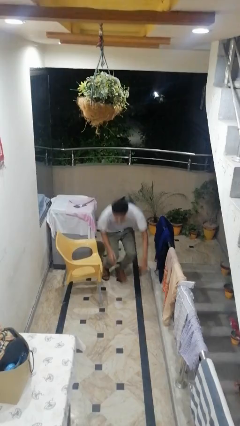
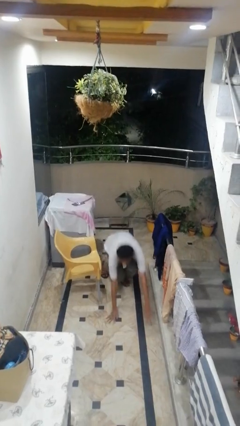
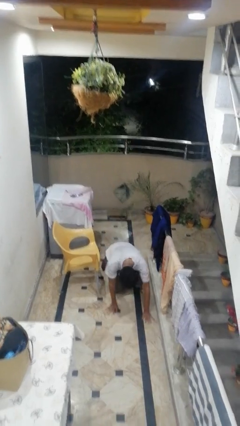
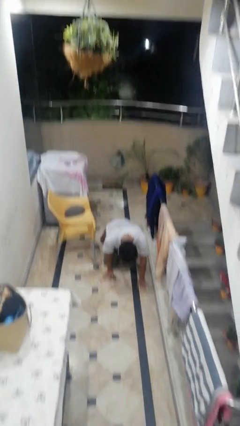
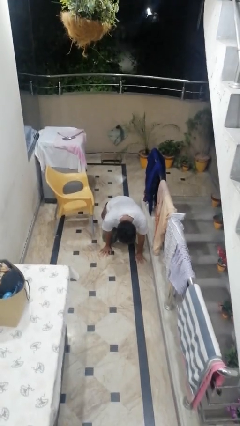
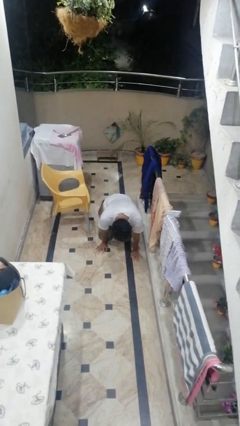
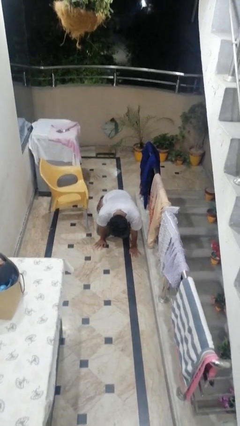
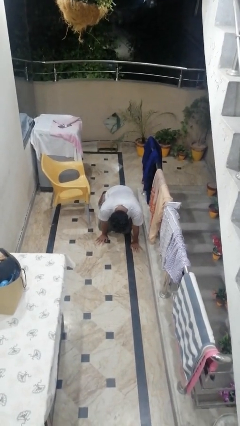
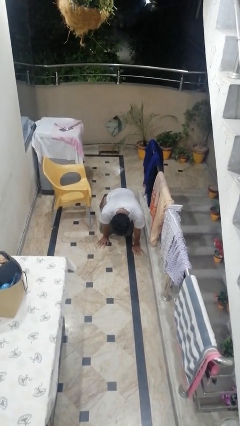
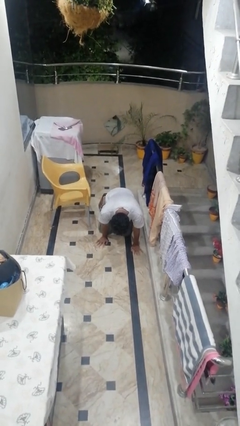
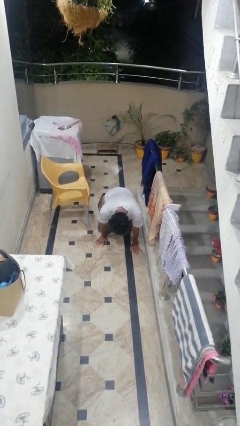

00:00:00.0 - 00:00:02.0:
person trips on object on floor

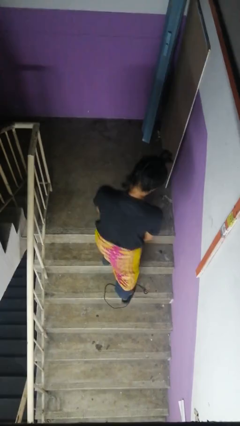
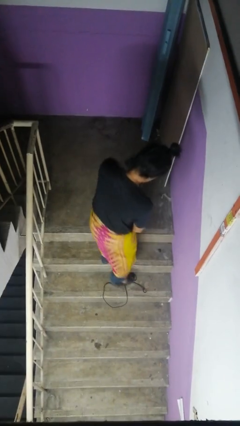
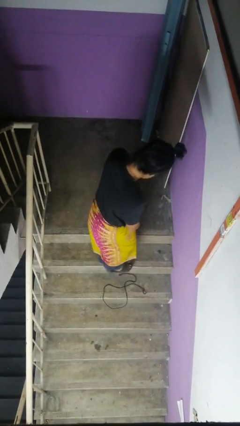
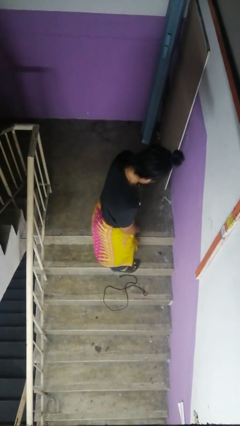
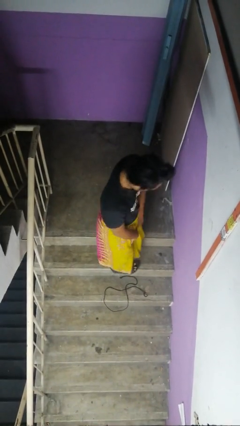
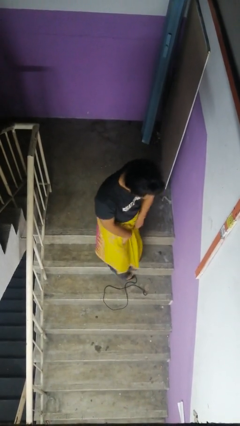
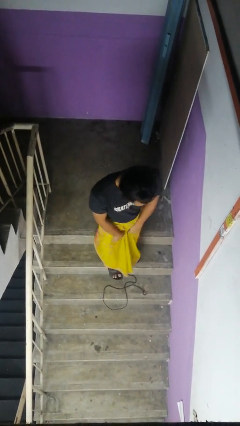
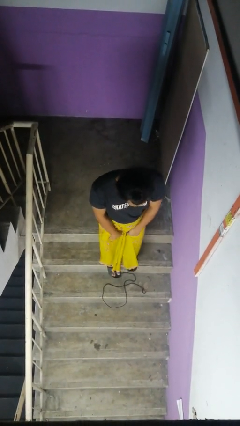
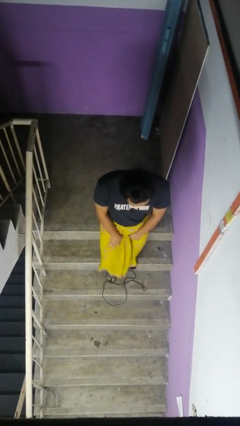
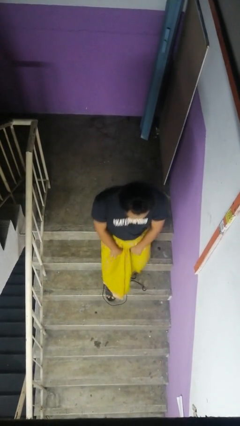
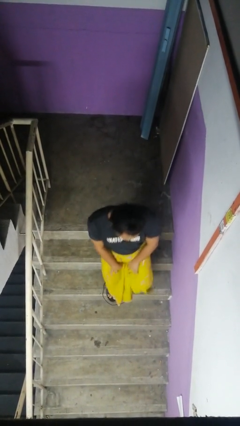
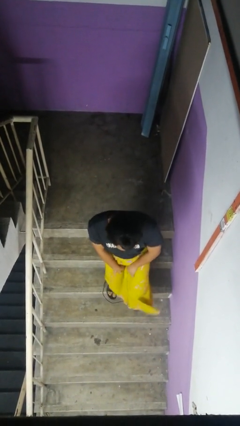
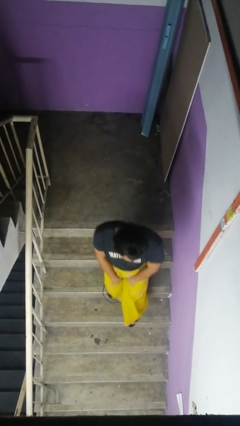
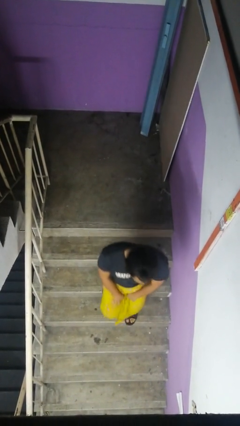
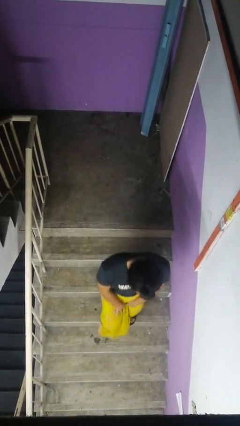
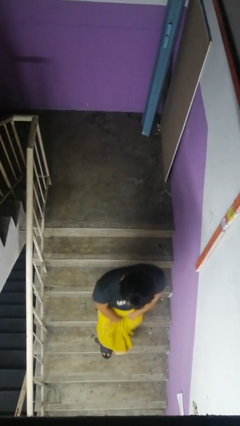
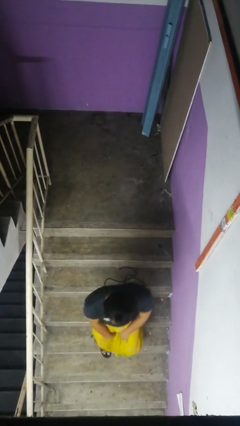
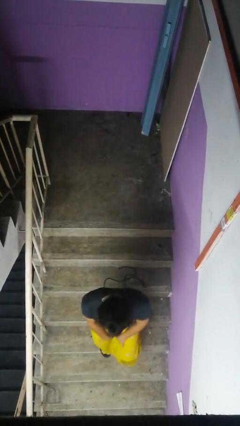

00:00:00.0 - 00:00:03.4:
person climbs down stairs

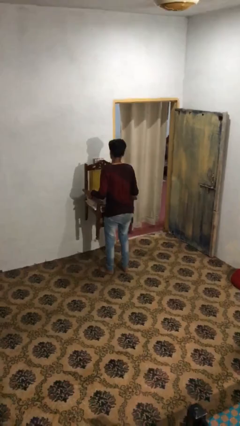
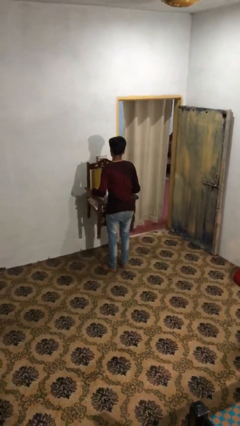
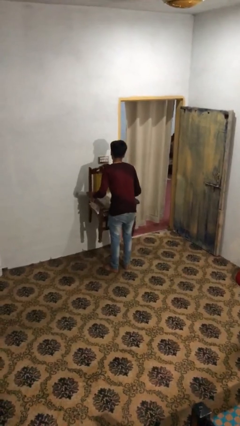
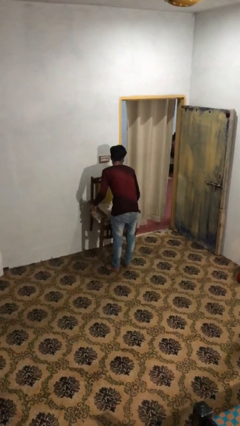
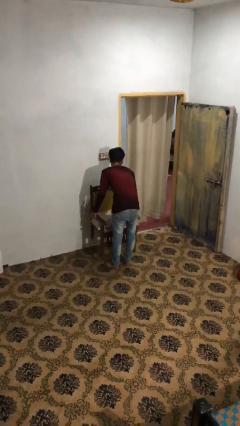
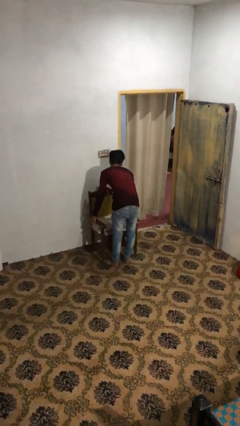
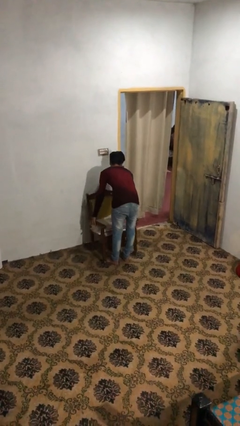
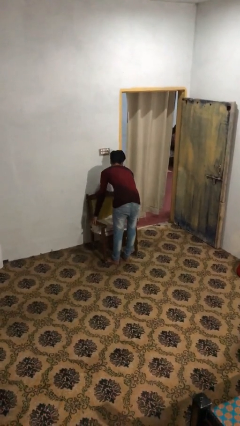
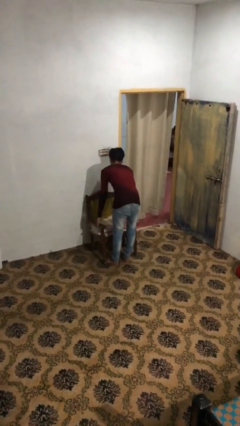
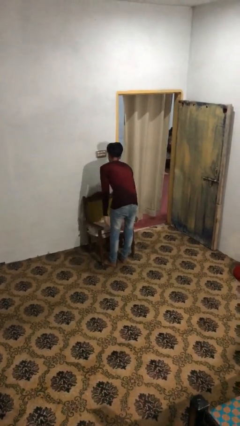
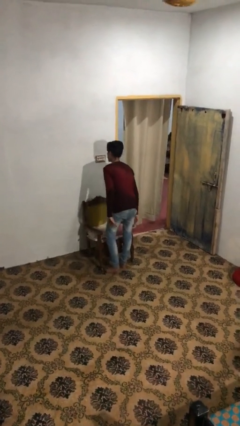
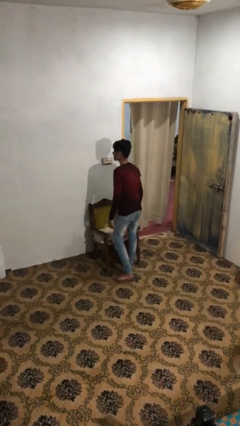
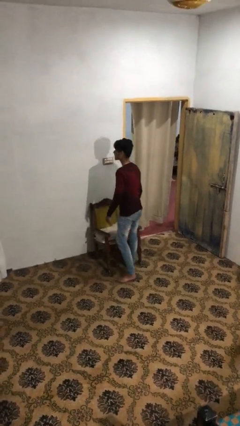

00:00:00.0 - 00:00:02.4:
person puts down object on floor

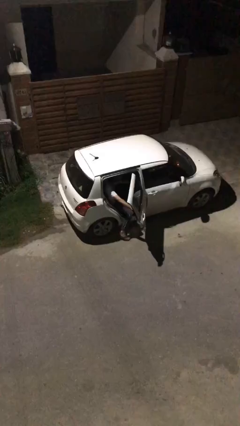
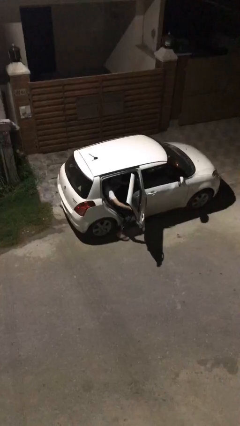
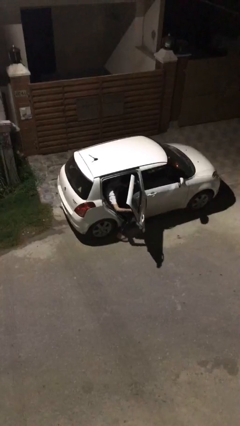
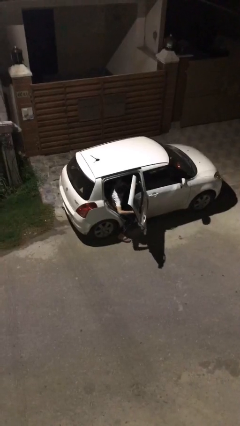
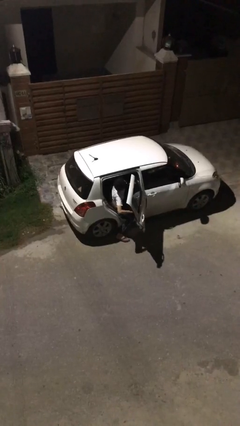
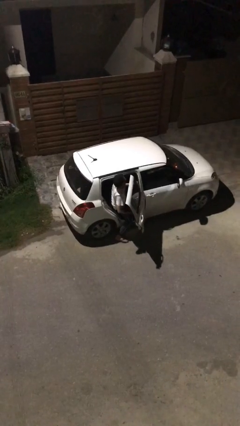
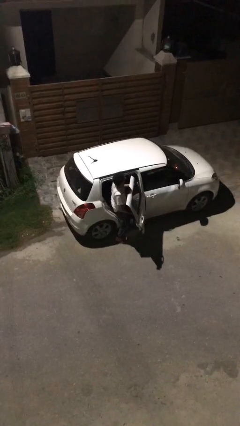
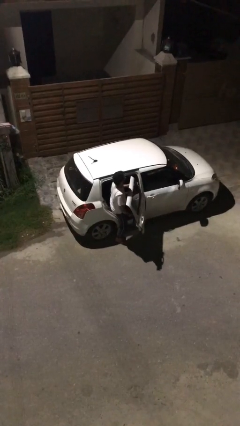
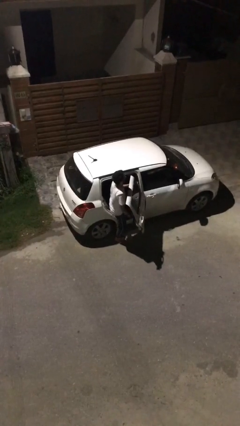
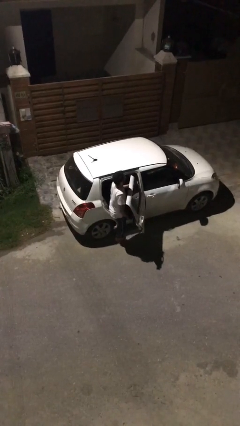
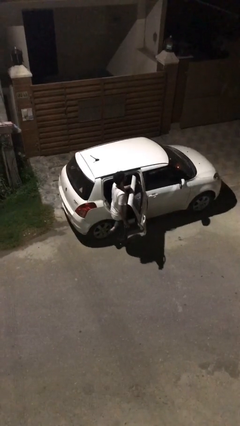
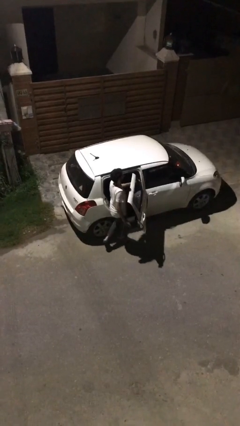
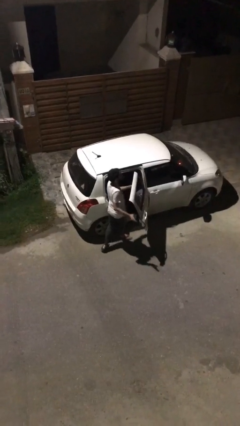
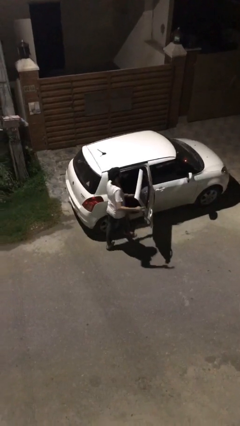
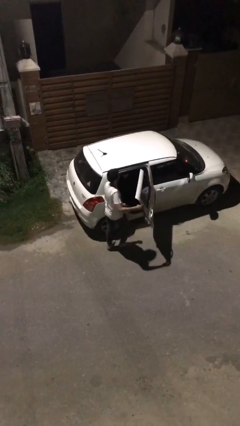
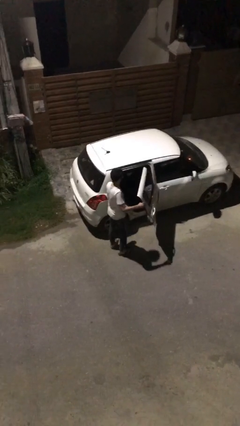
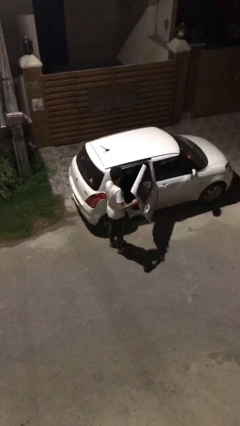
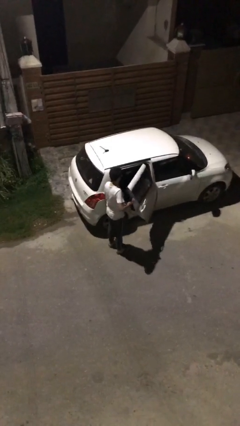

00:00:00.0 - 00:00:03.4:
person exits car

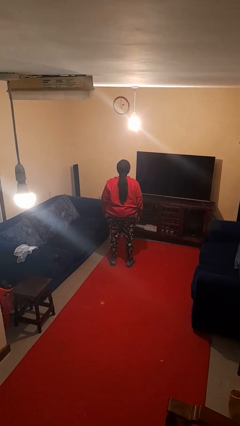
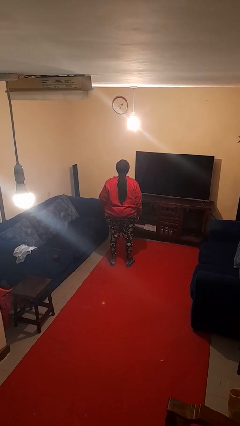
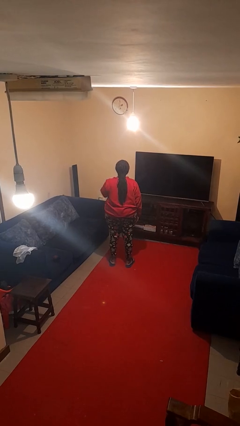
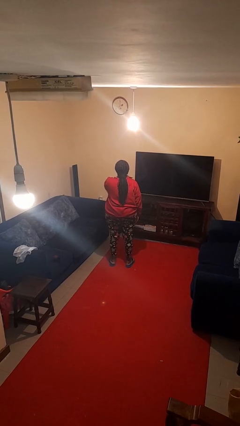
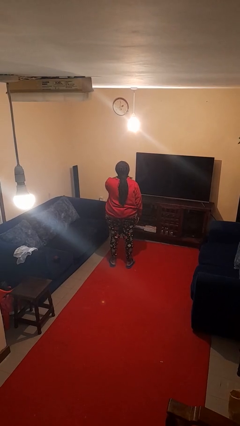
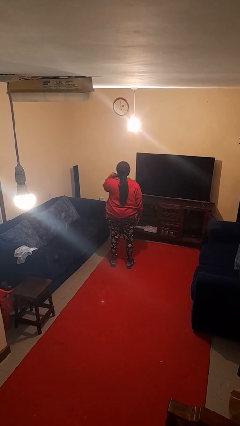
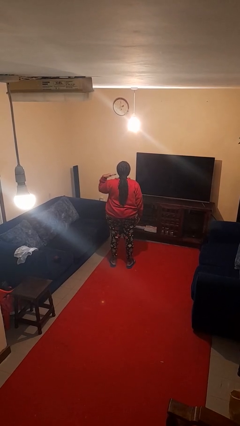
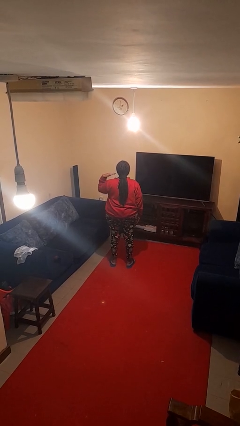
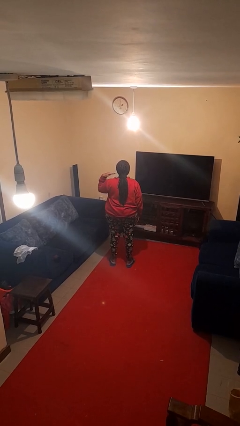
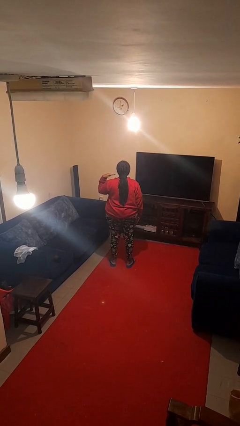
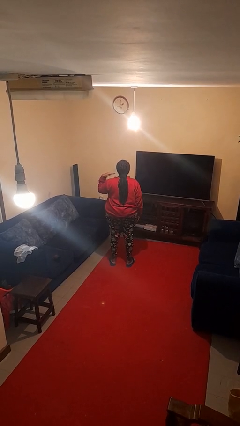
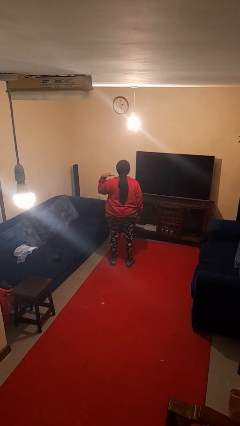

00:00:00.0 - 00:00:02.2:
person gestures cut

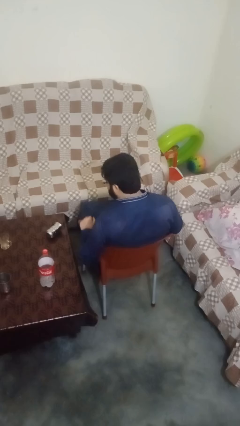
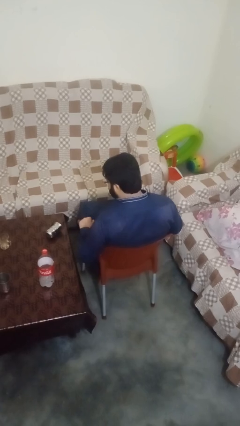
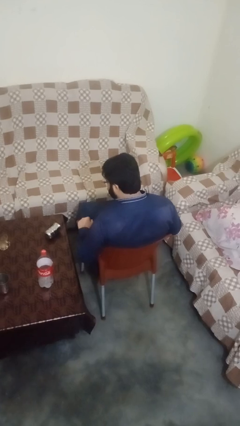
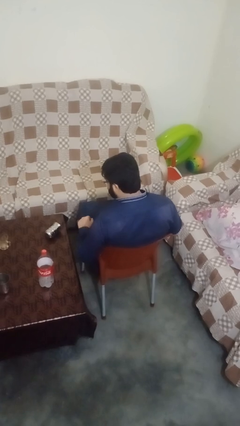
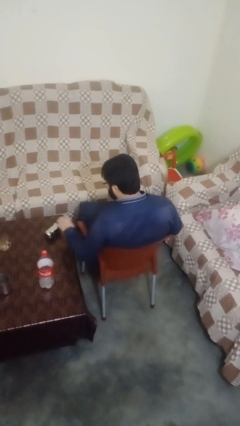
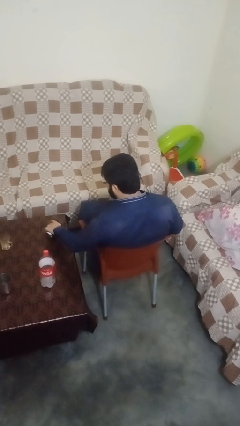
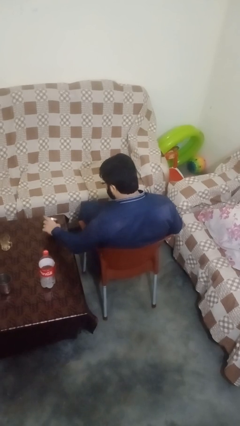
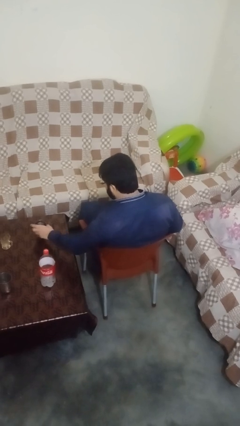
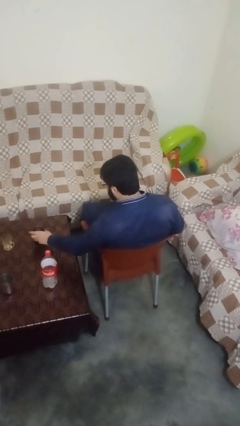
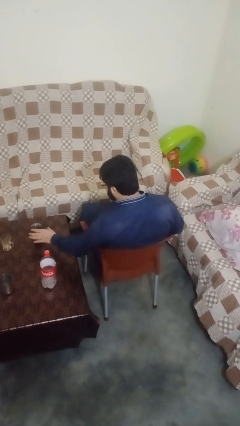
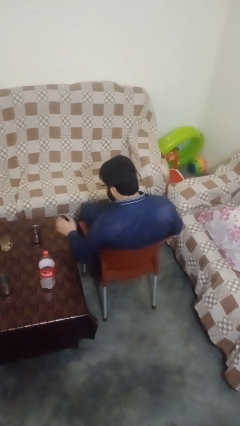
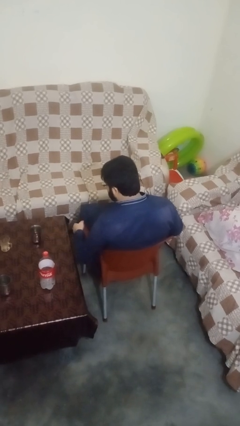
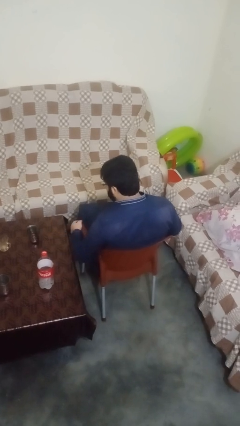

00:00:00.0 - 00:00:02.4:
person sets upright glass

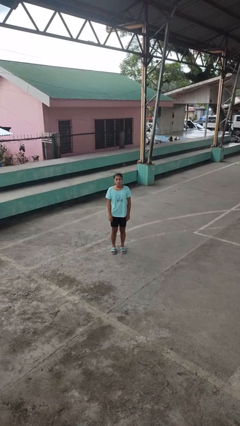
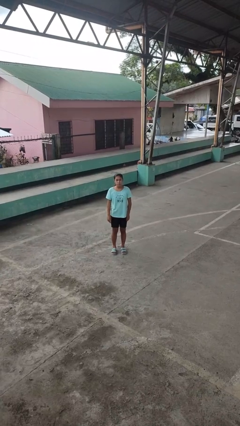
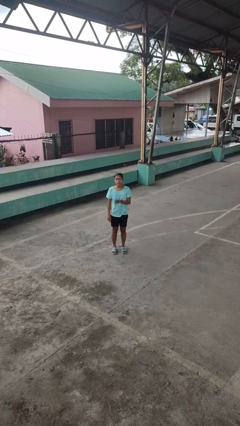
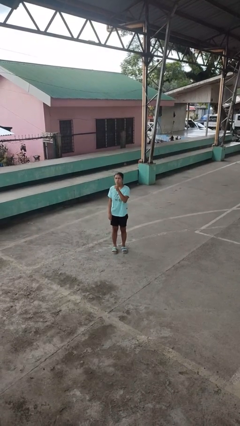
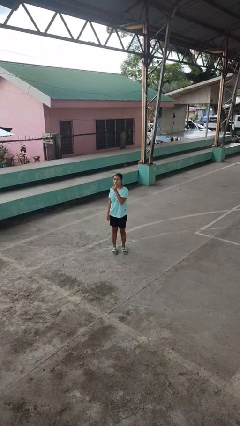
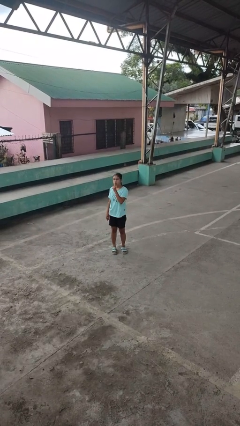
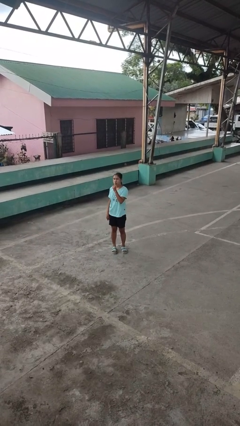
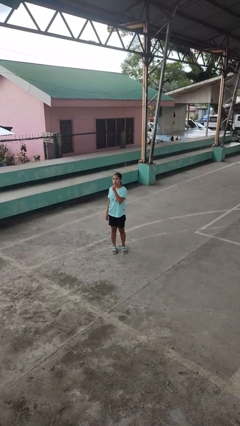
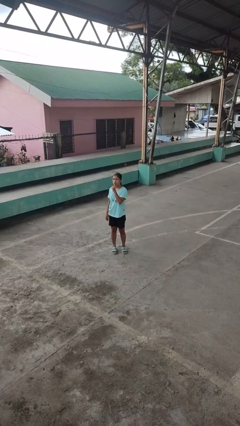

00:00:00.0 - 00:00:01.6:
person gestures be quiet
